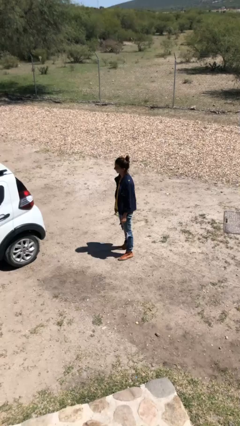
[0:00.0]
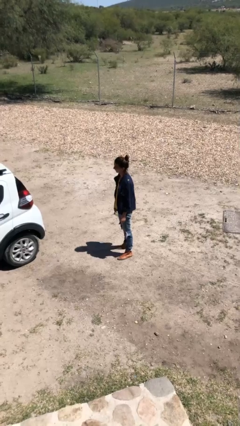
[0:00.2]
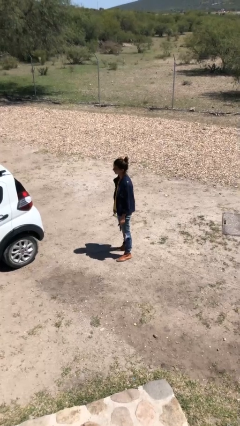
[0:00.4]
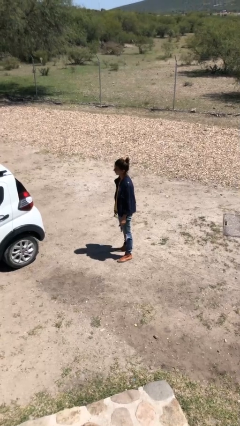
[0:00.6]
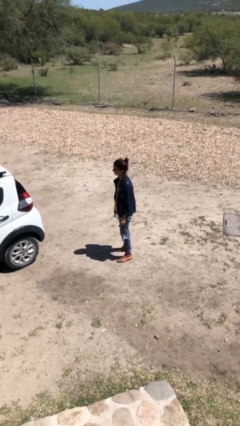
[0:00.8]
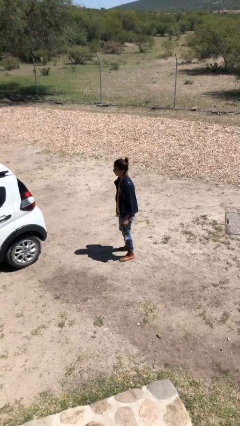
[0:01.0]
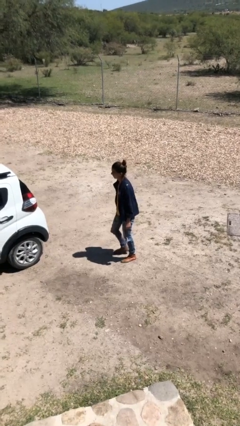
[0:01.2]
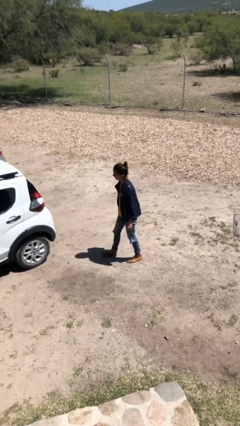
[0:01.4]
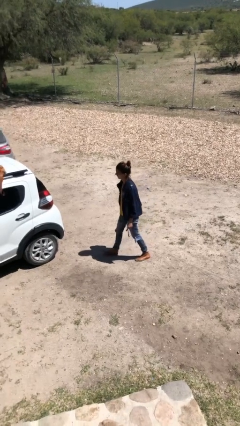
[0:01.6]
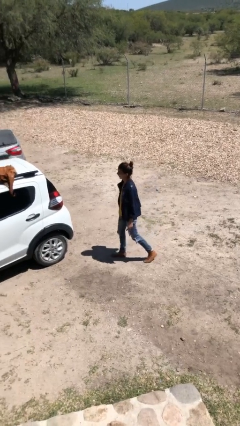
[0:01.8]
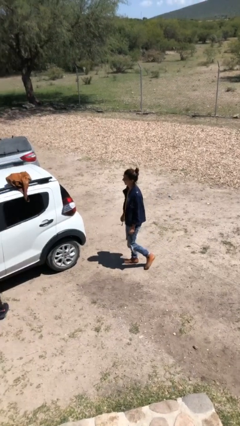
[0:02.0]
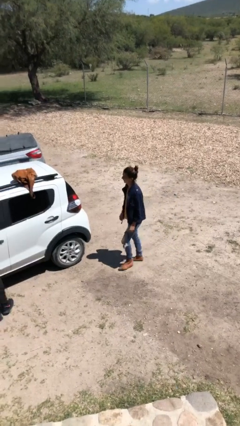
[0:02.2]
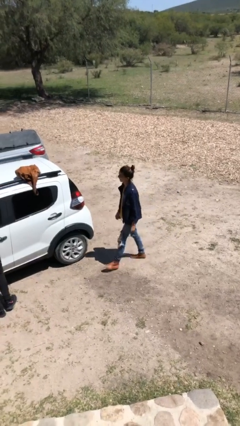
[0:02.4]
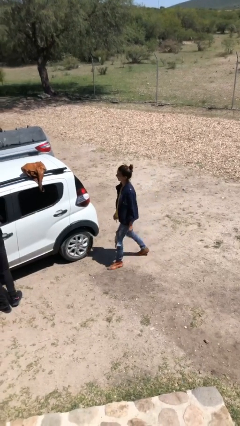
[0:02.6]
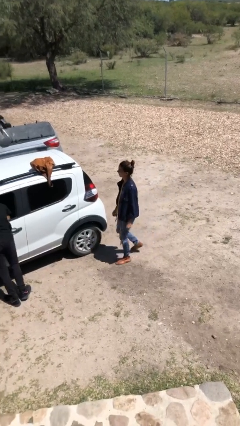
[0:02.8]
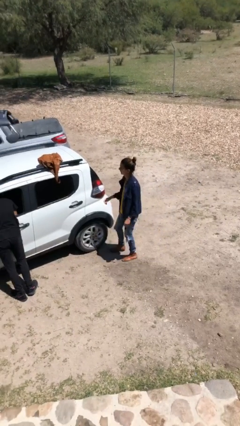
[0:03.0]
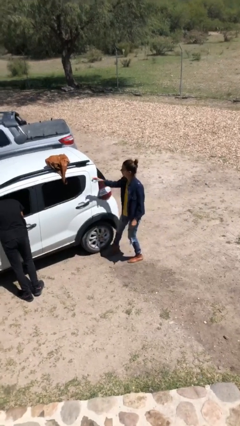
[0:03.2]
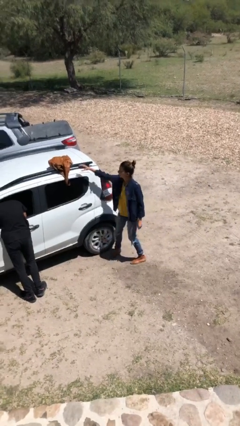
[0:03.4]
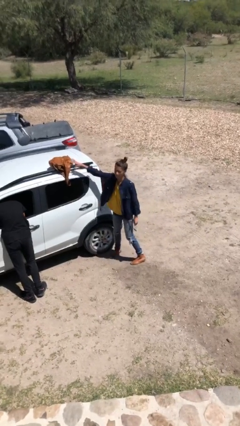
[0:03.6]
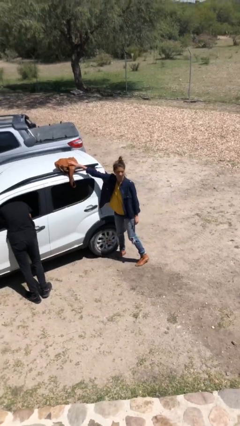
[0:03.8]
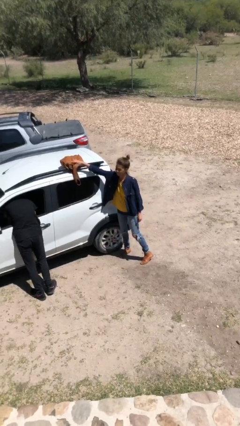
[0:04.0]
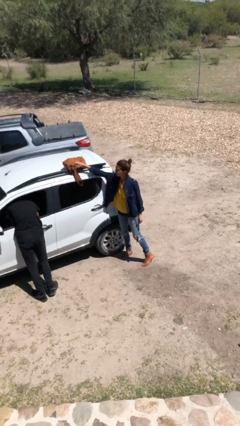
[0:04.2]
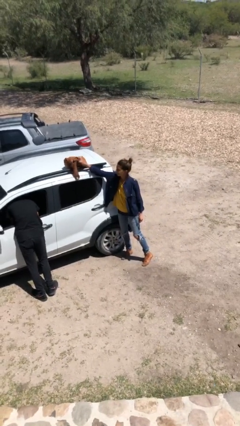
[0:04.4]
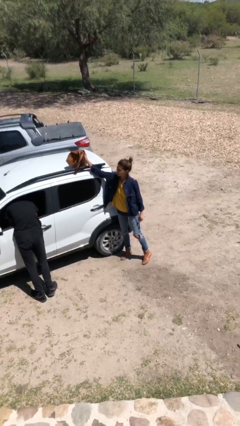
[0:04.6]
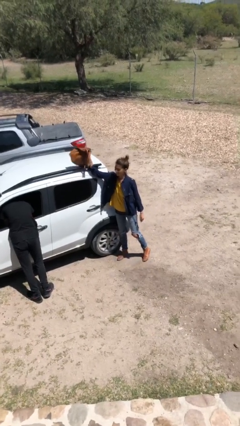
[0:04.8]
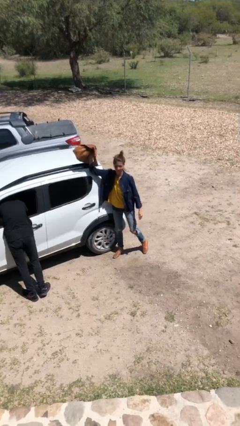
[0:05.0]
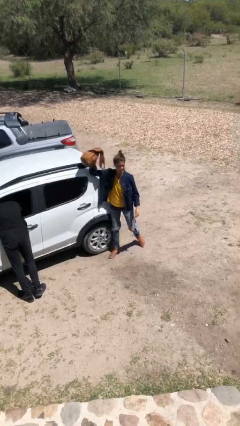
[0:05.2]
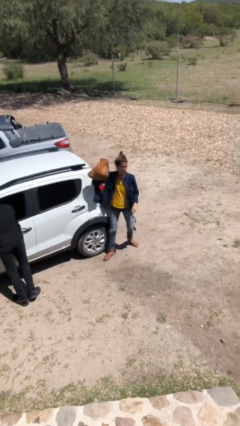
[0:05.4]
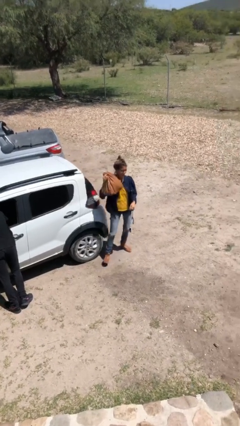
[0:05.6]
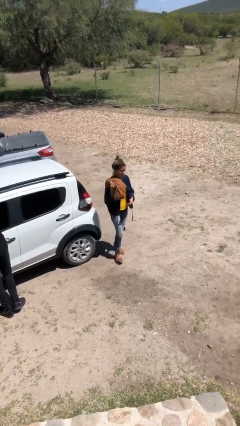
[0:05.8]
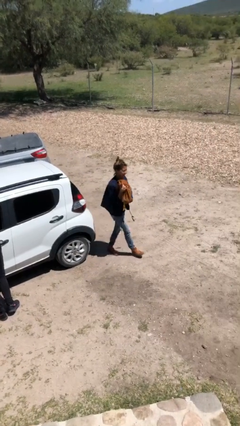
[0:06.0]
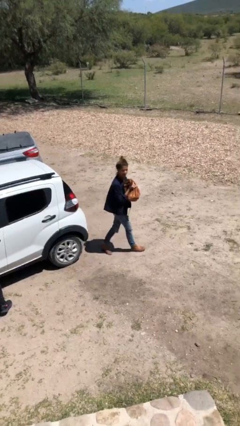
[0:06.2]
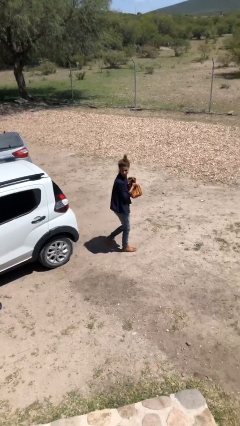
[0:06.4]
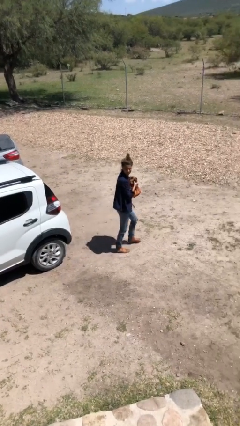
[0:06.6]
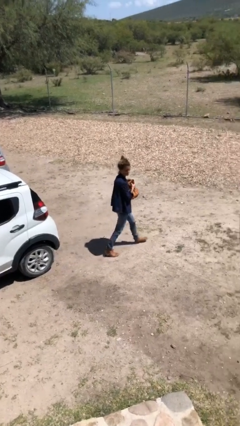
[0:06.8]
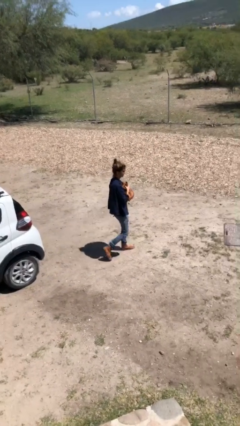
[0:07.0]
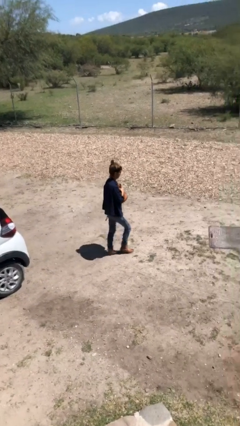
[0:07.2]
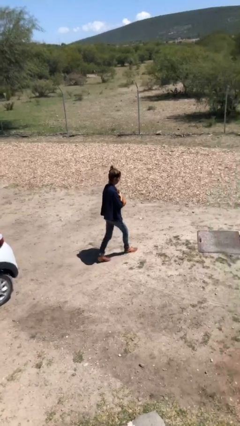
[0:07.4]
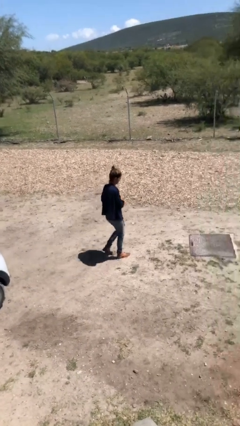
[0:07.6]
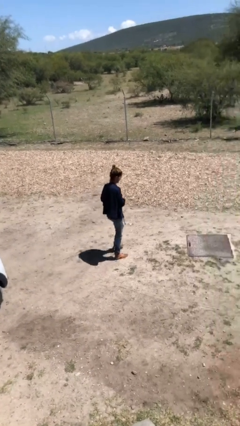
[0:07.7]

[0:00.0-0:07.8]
person steals object from person

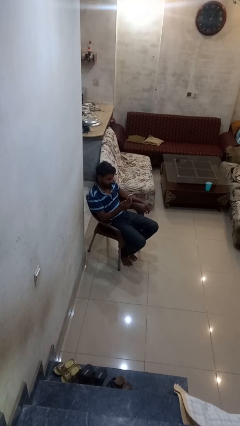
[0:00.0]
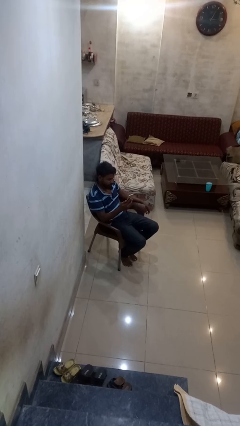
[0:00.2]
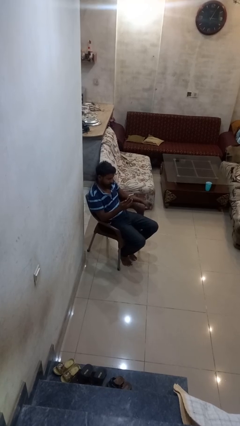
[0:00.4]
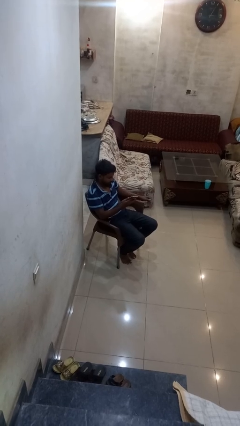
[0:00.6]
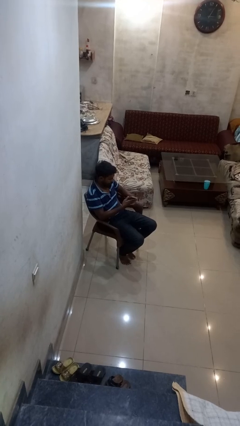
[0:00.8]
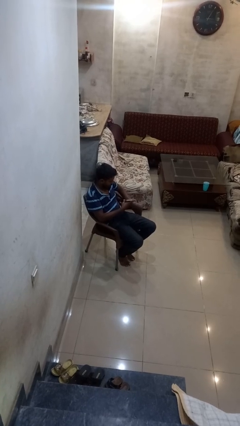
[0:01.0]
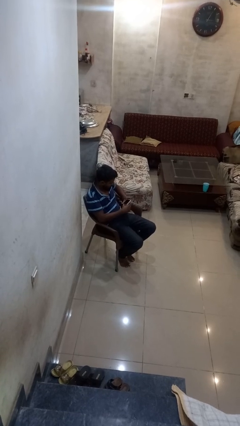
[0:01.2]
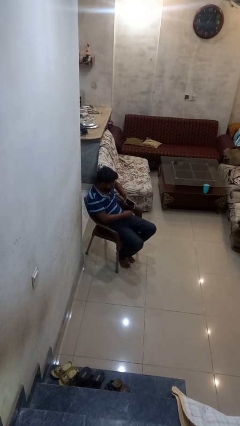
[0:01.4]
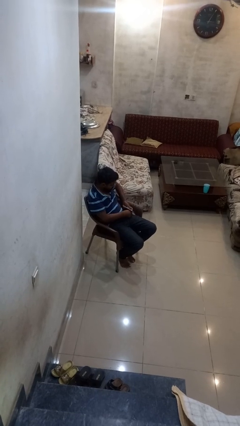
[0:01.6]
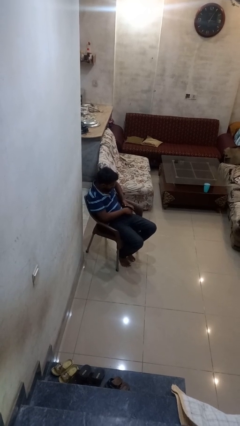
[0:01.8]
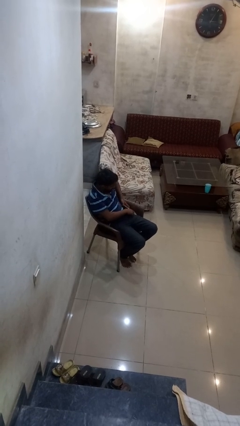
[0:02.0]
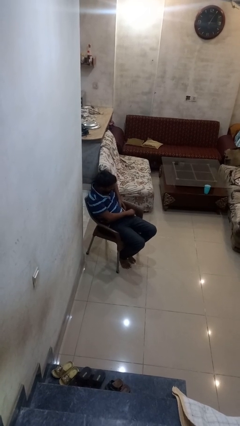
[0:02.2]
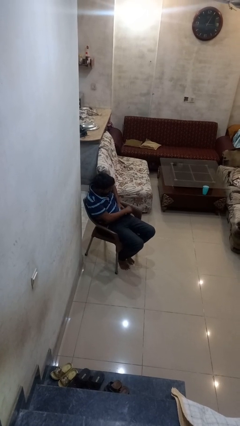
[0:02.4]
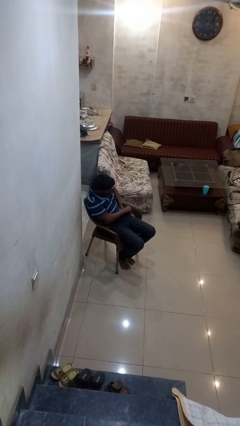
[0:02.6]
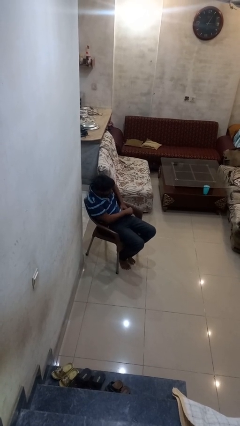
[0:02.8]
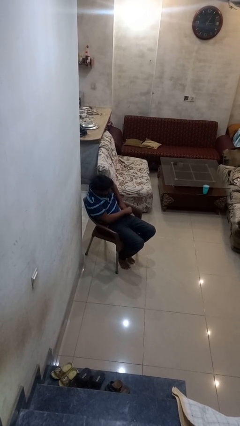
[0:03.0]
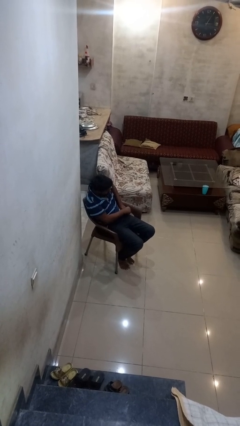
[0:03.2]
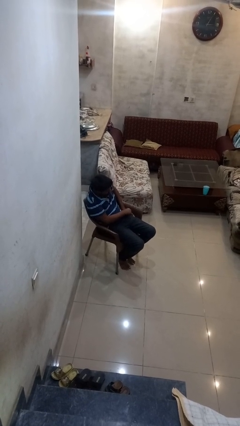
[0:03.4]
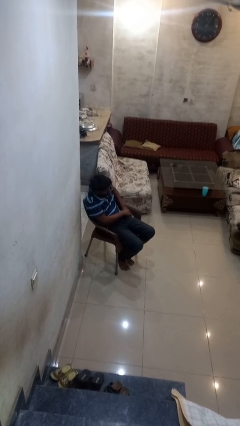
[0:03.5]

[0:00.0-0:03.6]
person puts phone into pocket

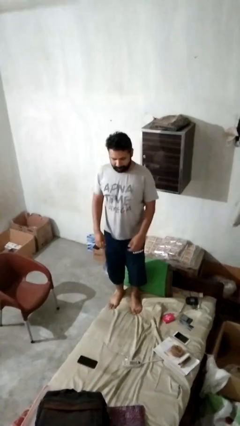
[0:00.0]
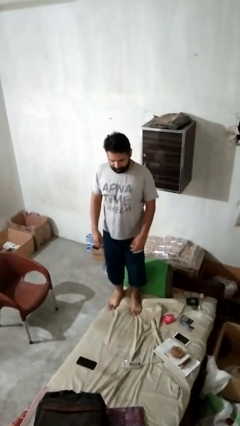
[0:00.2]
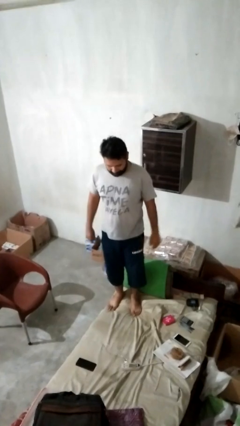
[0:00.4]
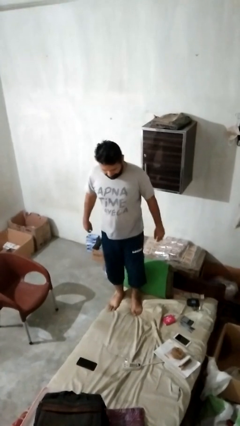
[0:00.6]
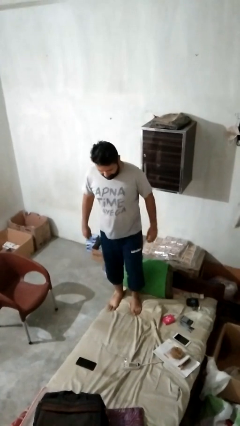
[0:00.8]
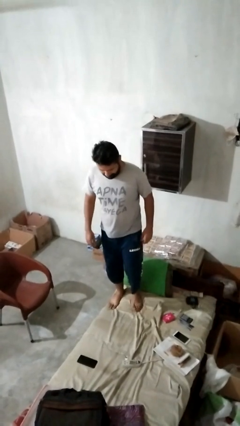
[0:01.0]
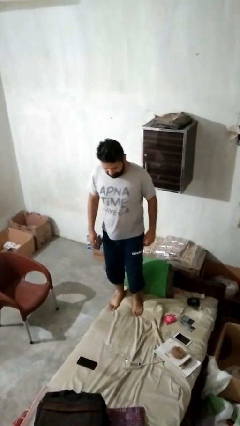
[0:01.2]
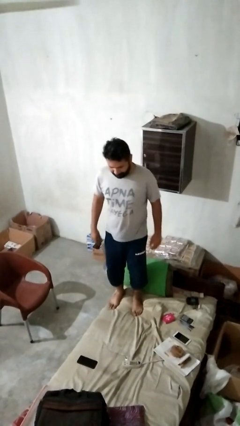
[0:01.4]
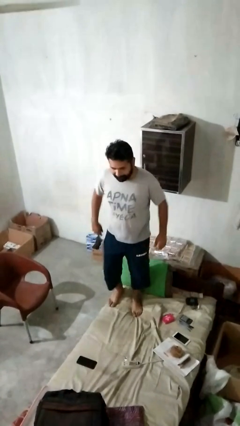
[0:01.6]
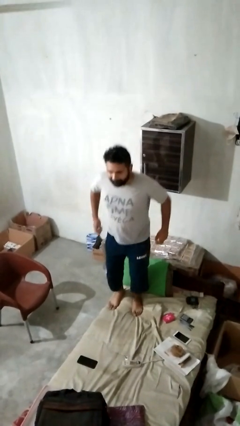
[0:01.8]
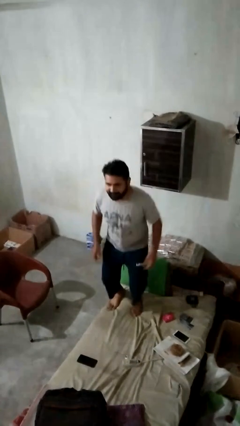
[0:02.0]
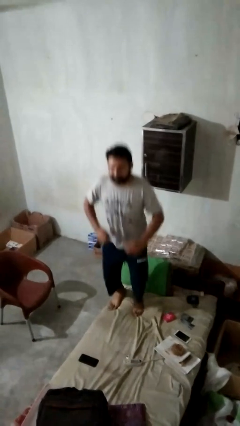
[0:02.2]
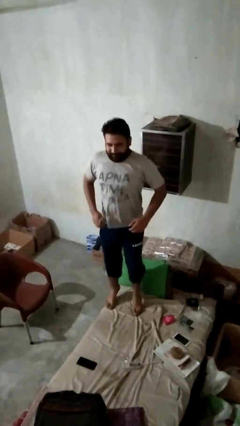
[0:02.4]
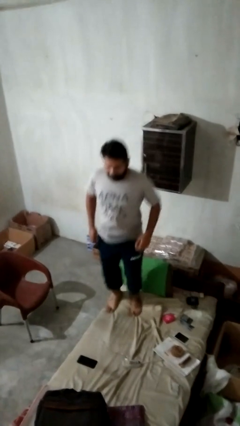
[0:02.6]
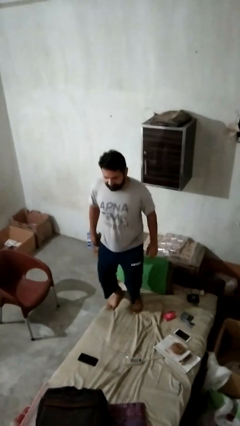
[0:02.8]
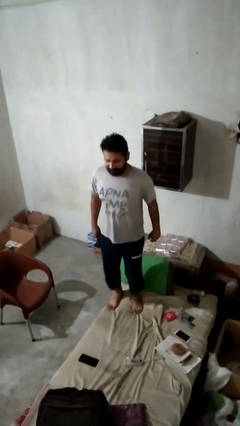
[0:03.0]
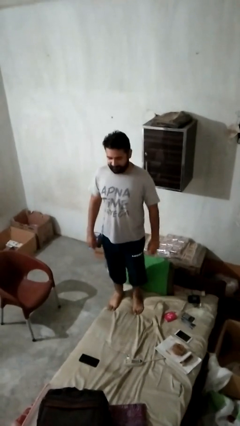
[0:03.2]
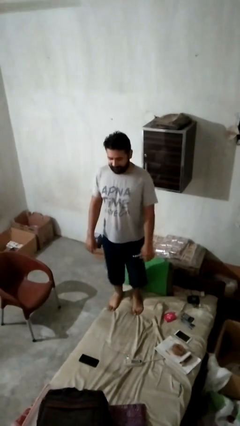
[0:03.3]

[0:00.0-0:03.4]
person jumps on bed

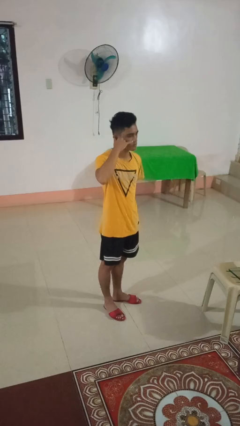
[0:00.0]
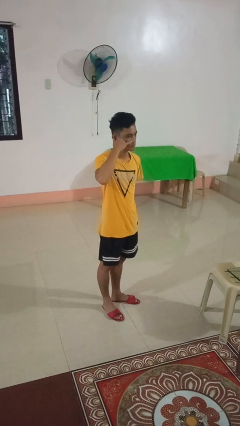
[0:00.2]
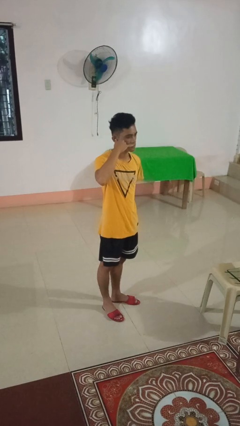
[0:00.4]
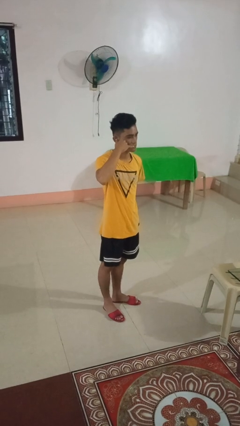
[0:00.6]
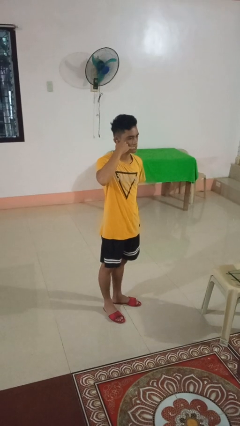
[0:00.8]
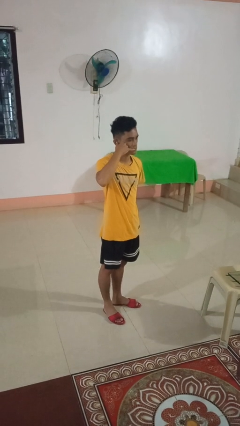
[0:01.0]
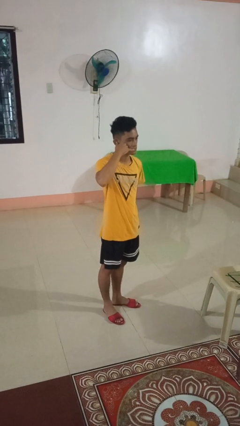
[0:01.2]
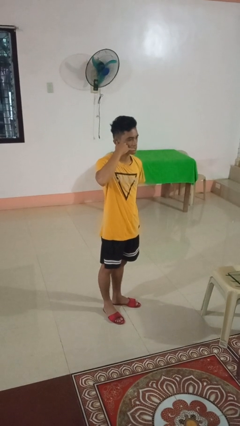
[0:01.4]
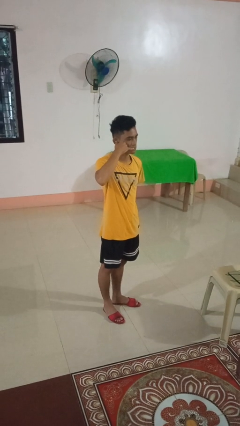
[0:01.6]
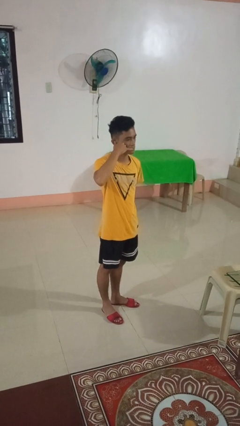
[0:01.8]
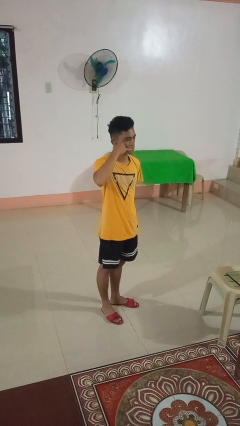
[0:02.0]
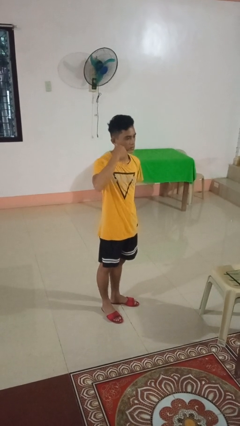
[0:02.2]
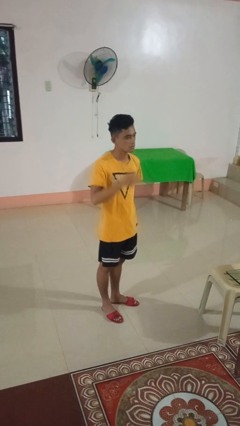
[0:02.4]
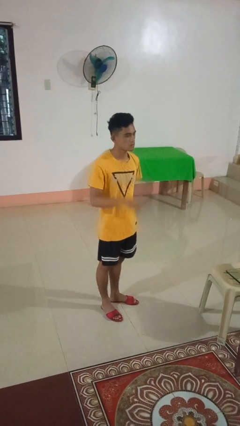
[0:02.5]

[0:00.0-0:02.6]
person gestures call me

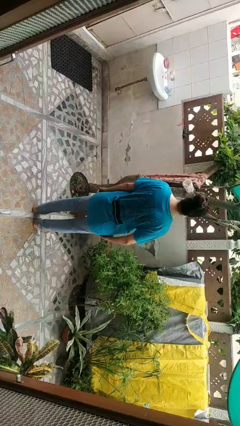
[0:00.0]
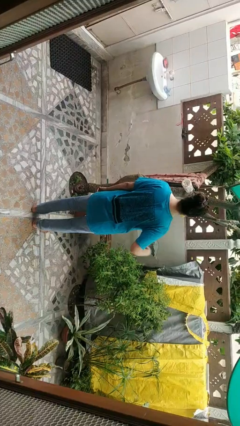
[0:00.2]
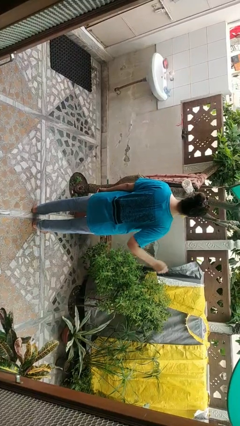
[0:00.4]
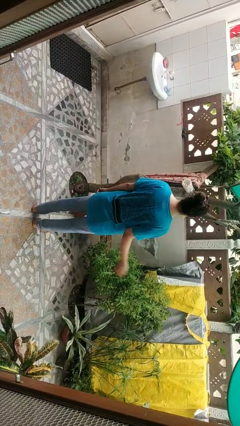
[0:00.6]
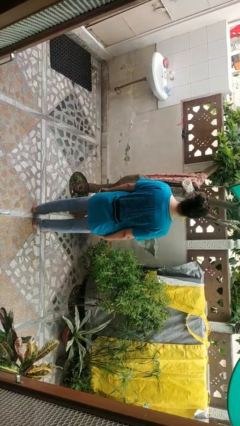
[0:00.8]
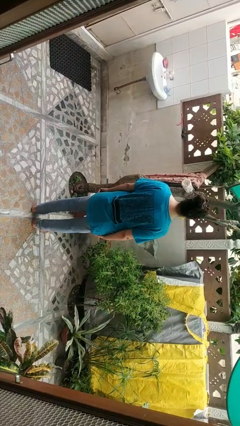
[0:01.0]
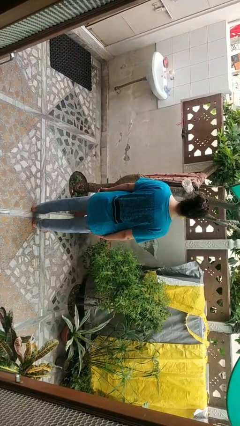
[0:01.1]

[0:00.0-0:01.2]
person slaps hands on thighs
